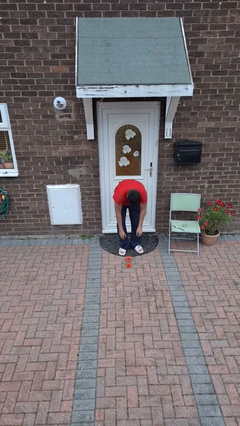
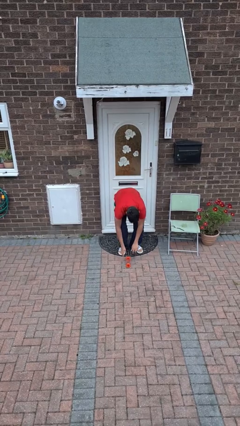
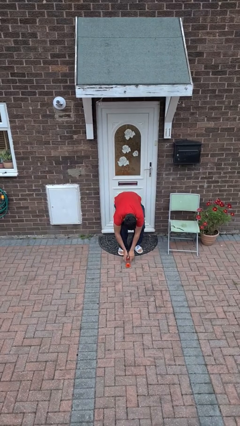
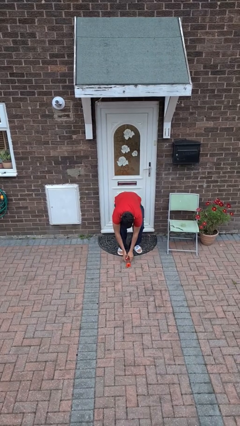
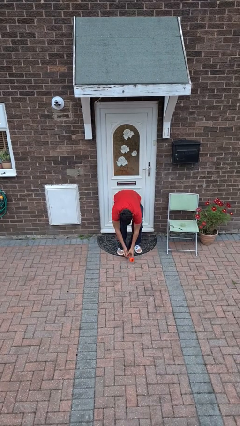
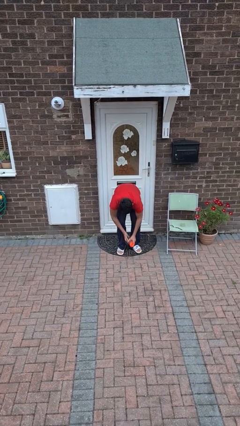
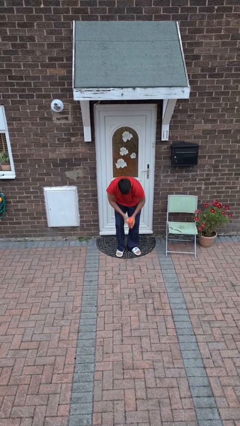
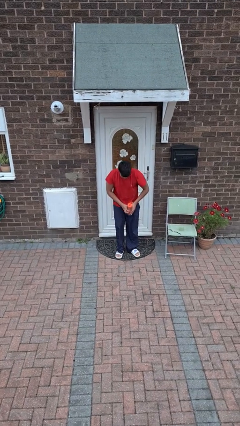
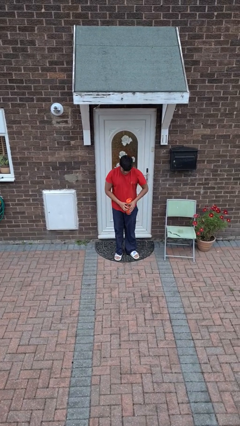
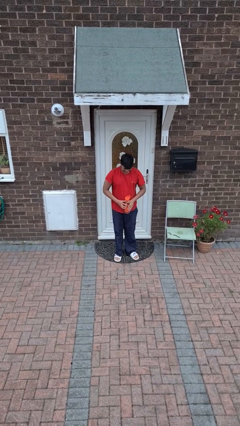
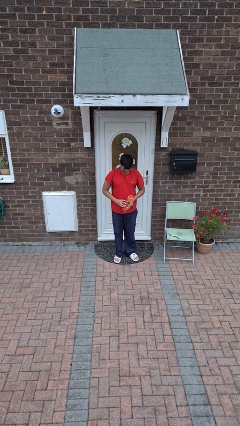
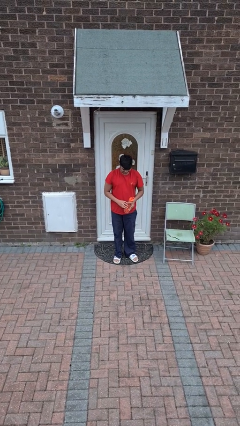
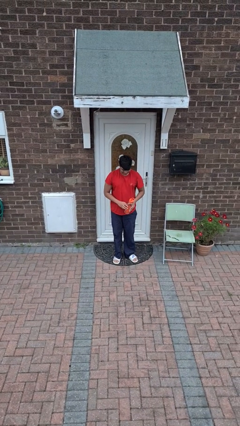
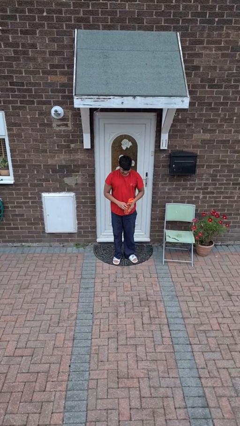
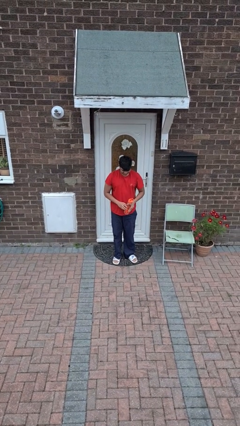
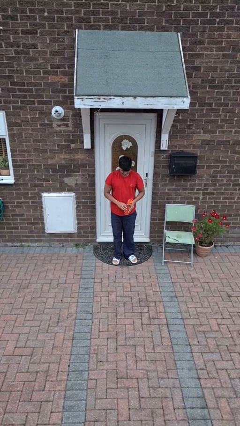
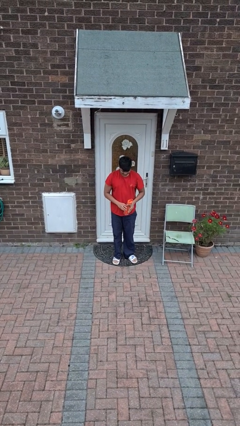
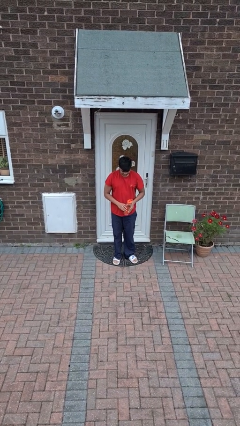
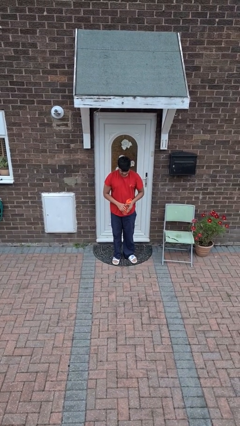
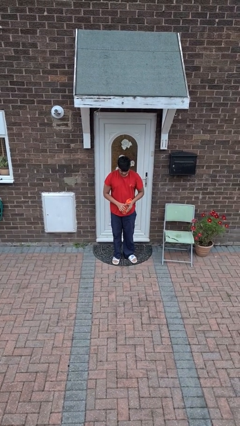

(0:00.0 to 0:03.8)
person picks up object from floor

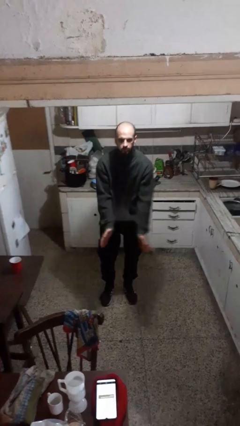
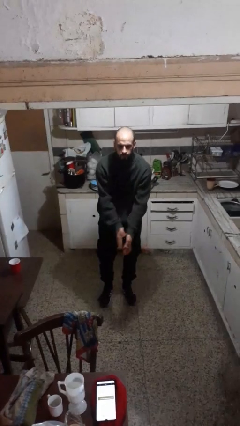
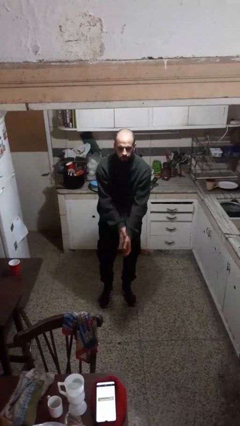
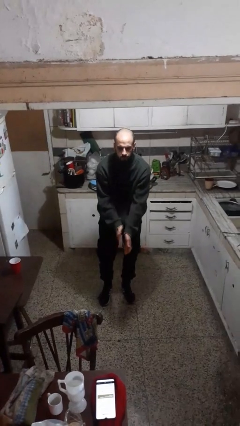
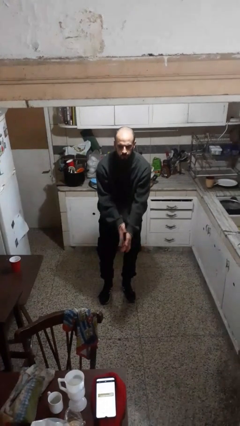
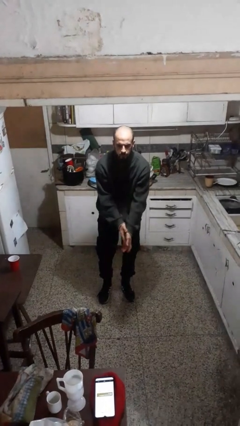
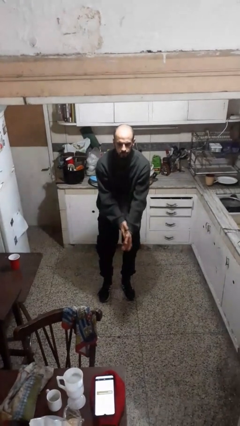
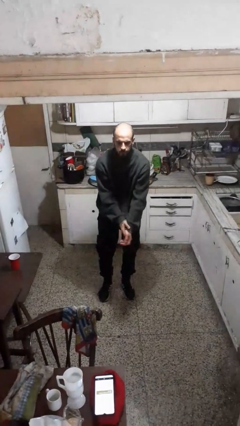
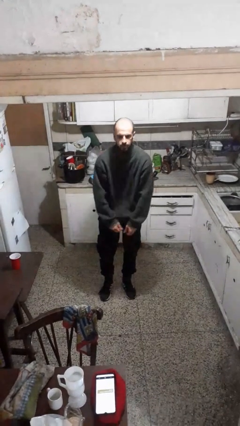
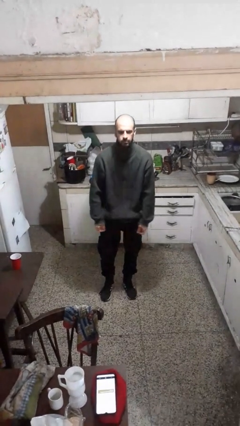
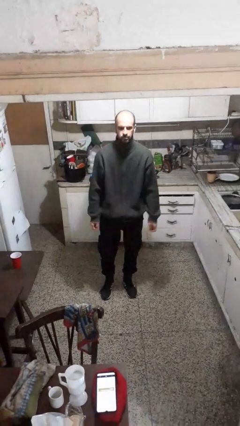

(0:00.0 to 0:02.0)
person claps hands

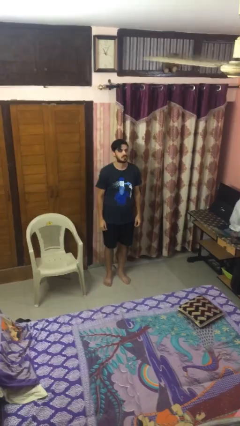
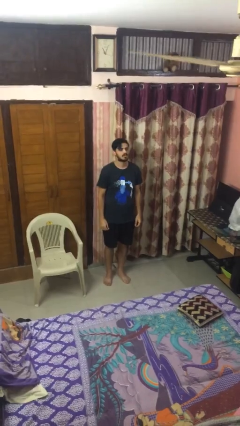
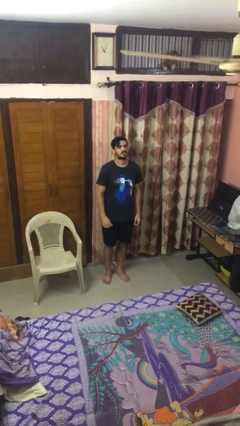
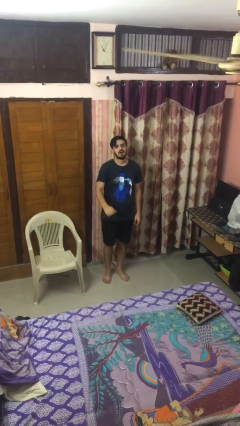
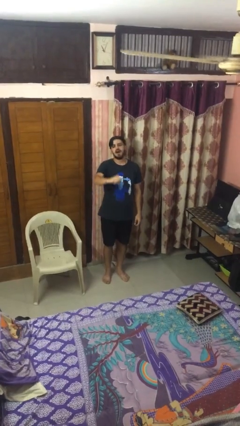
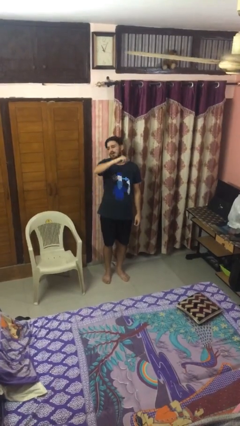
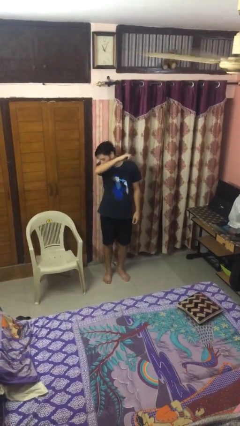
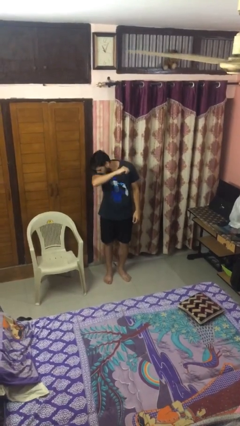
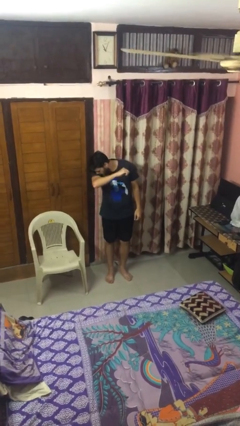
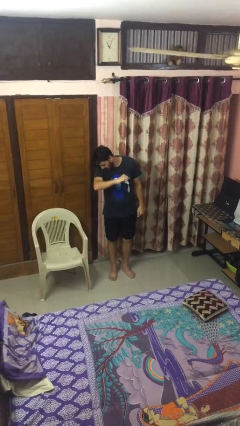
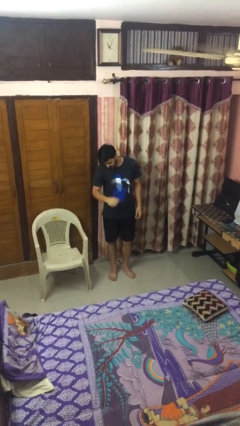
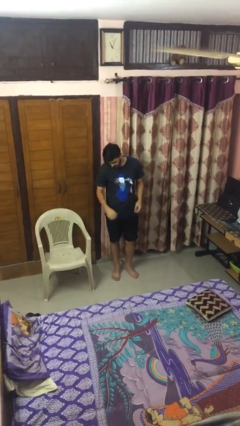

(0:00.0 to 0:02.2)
person sneezes into arm

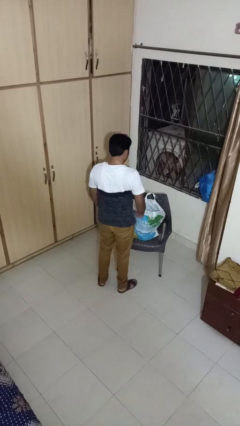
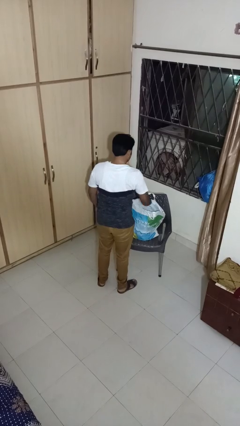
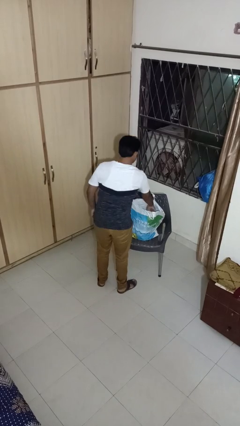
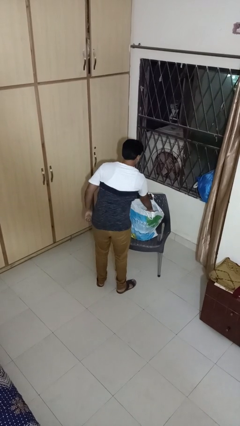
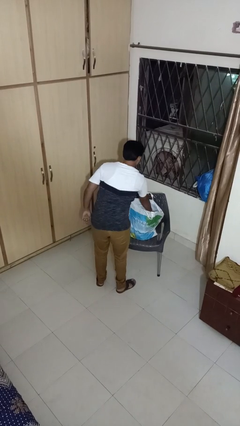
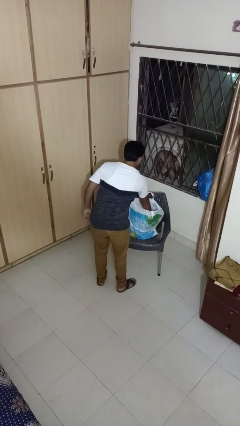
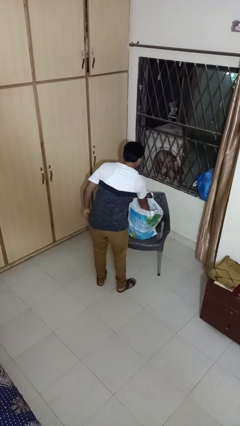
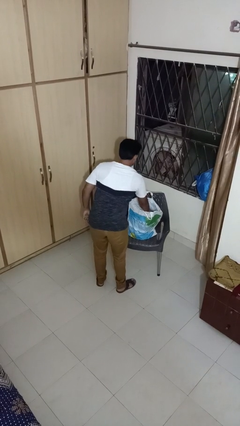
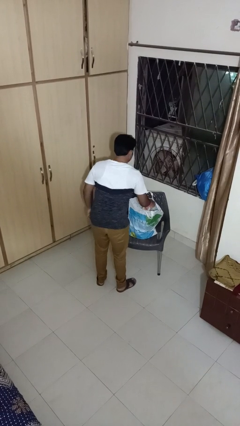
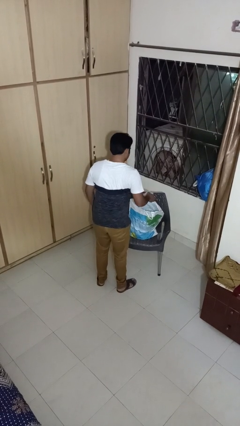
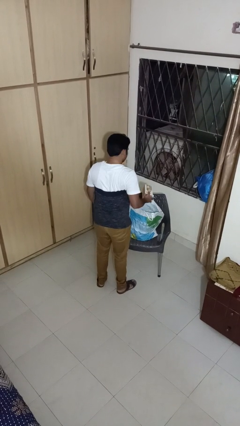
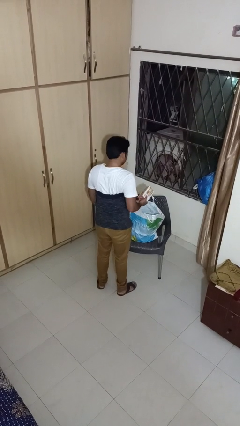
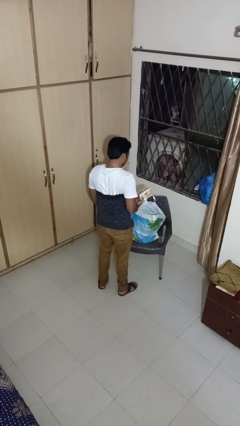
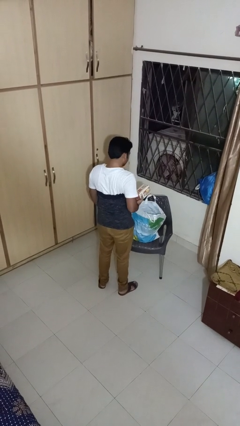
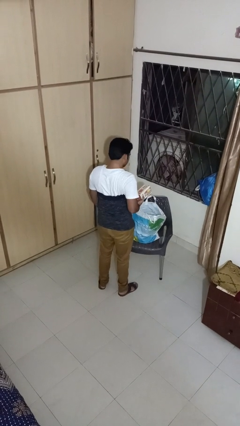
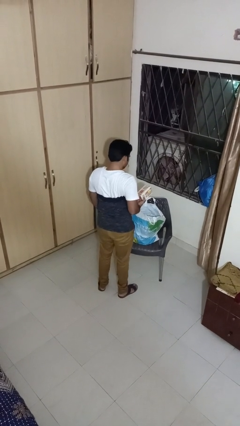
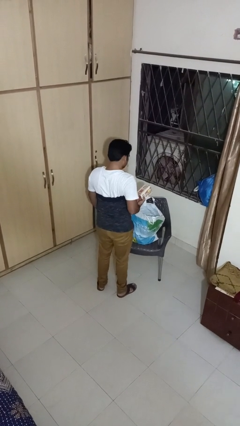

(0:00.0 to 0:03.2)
person takes object from bag

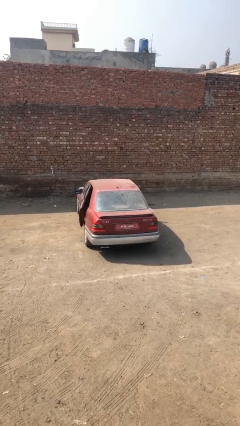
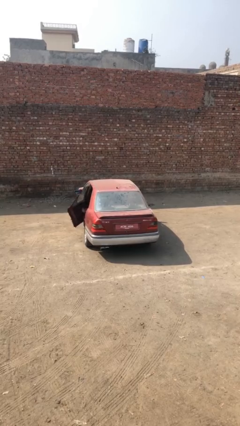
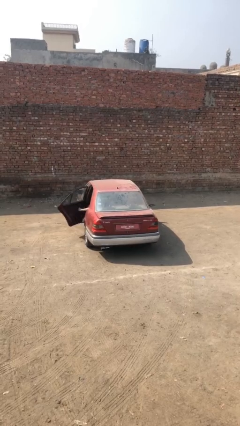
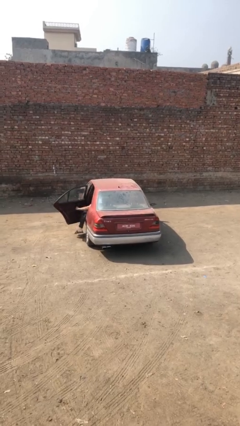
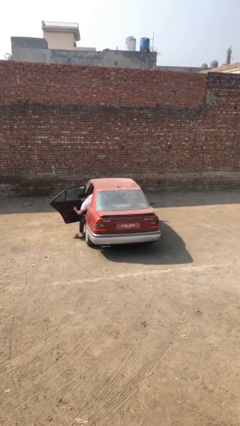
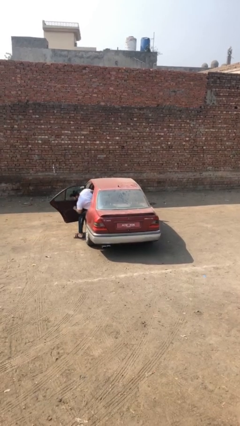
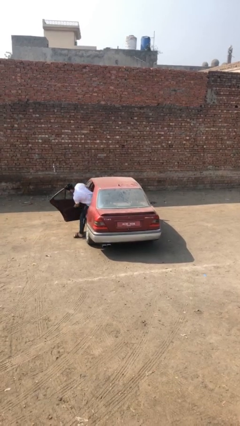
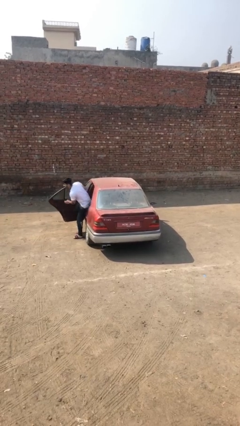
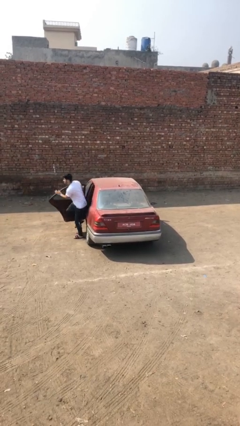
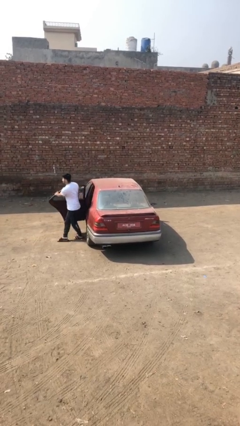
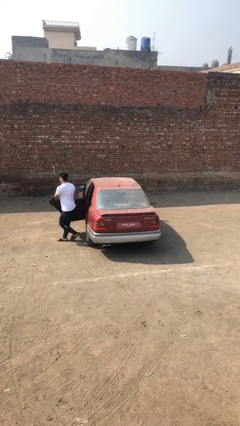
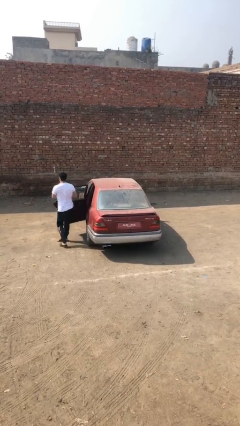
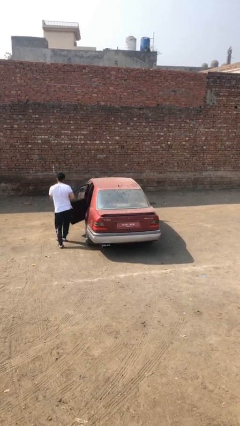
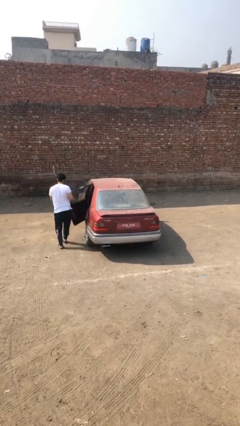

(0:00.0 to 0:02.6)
car drops off person

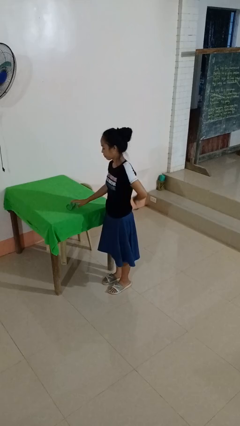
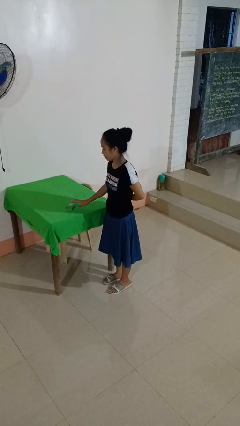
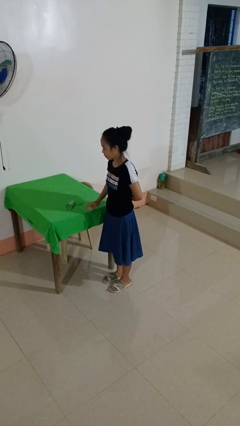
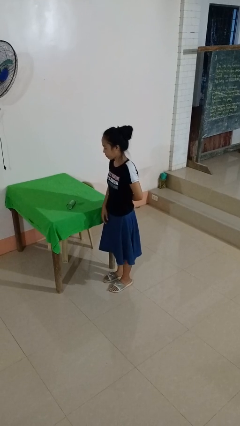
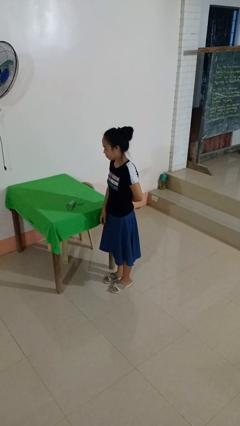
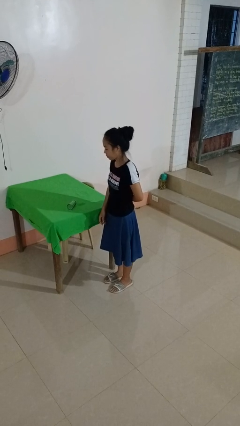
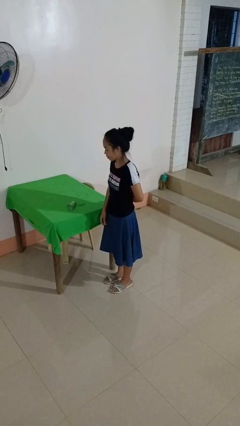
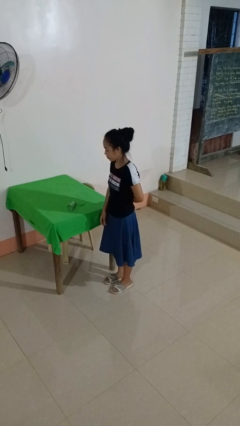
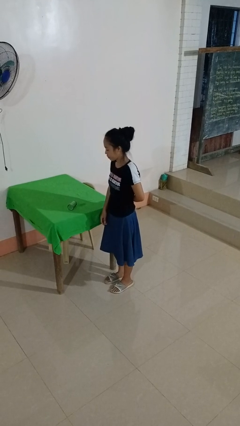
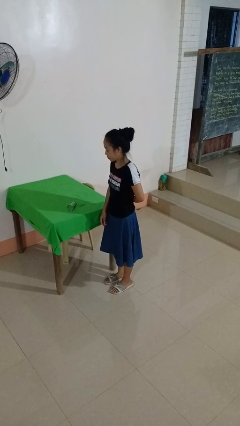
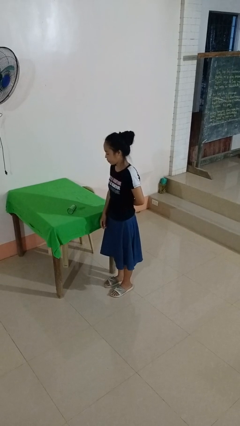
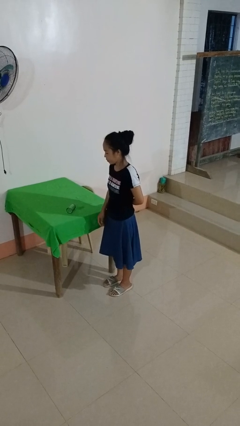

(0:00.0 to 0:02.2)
person knocks over glass

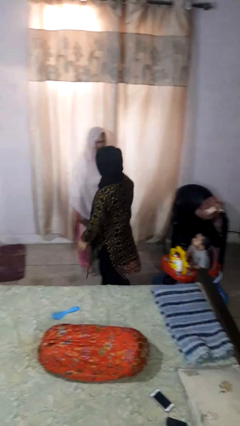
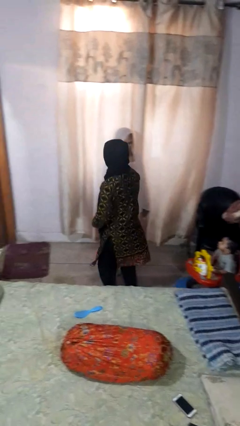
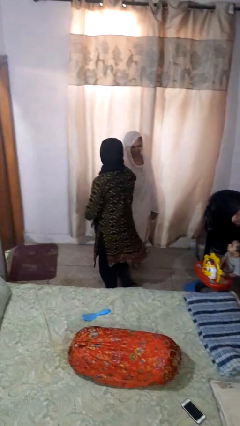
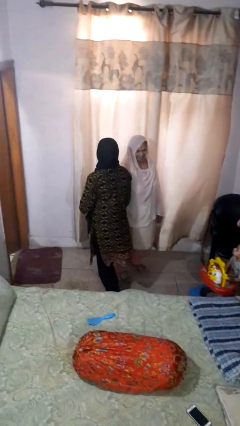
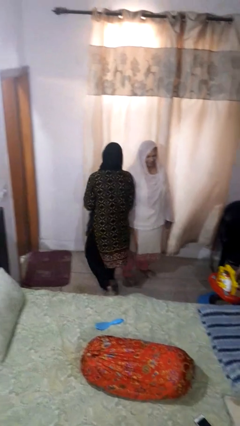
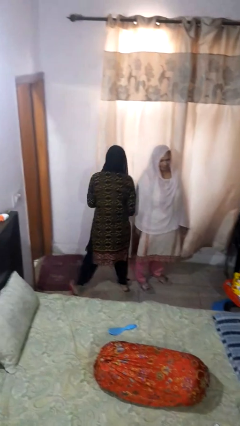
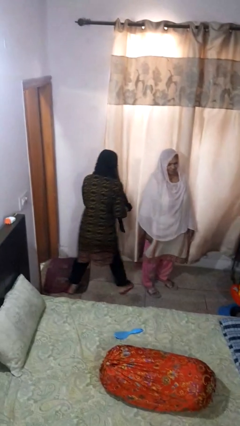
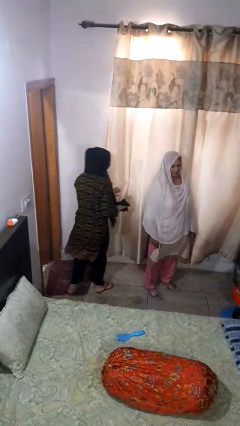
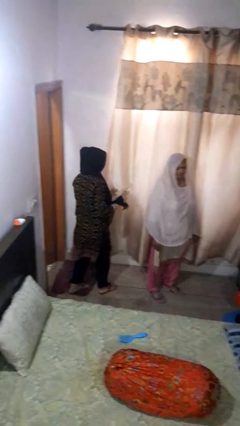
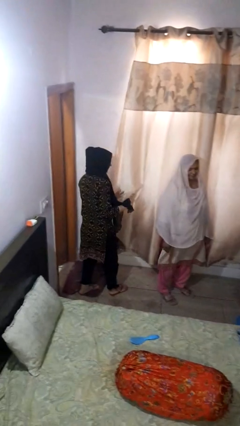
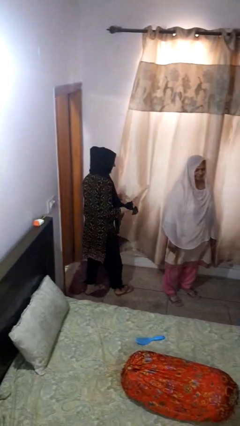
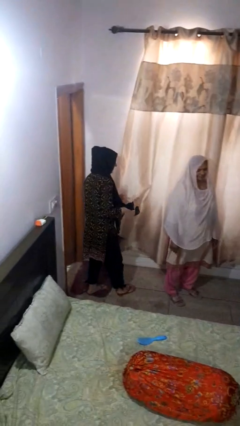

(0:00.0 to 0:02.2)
person bumps into person
